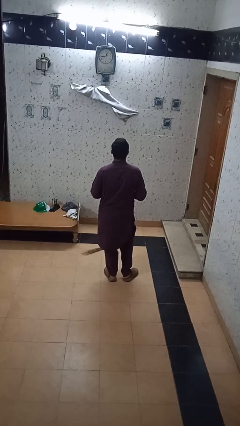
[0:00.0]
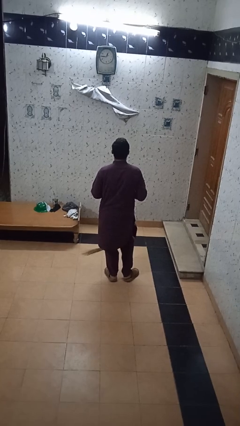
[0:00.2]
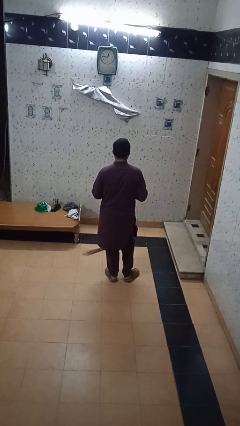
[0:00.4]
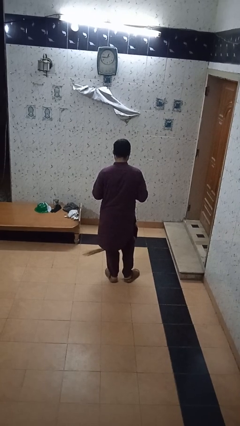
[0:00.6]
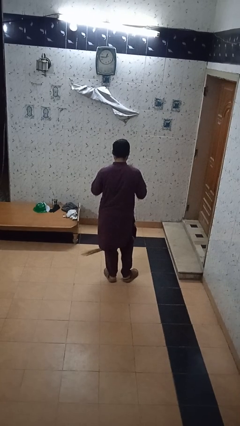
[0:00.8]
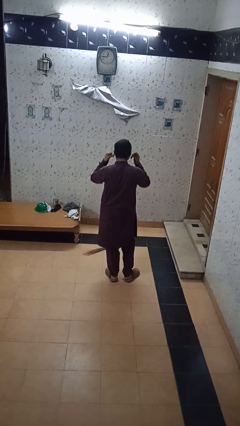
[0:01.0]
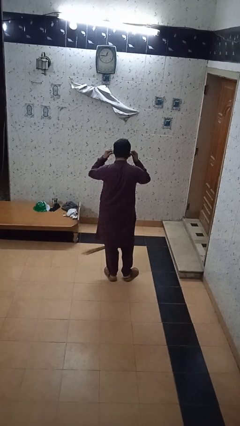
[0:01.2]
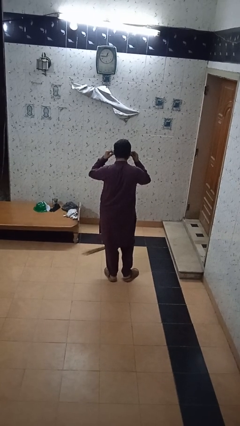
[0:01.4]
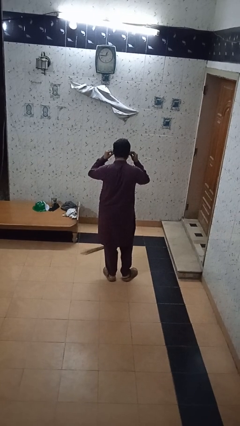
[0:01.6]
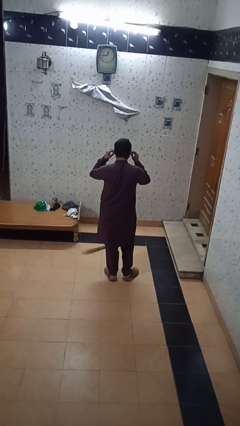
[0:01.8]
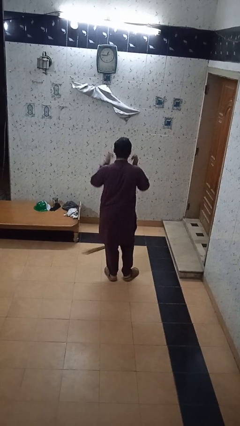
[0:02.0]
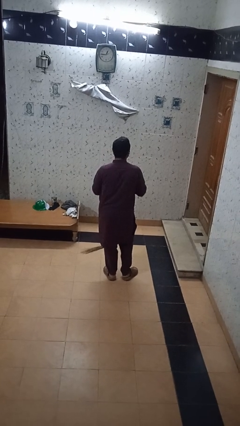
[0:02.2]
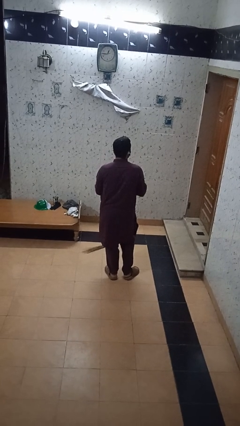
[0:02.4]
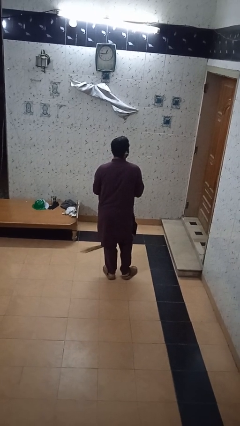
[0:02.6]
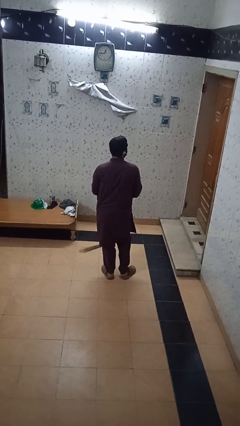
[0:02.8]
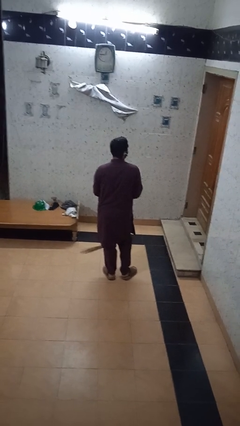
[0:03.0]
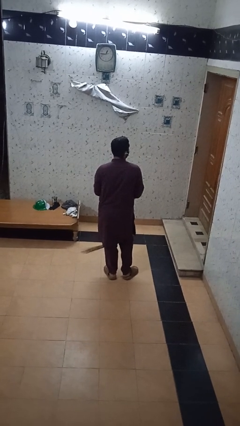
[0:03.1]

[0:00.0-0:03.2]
person puts on headphones

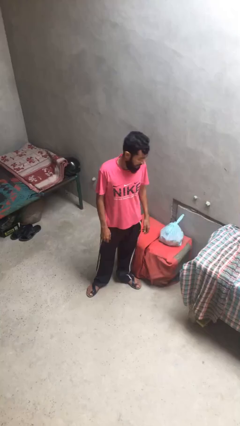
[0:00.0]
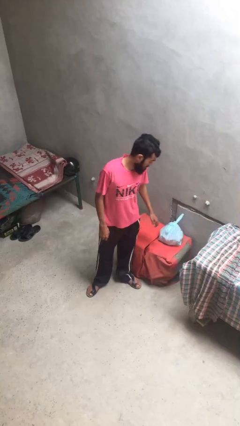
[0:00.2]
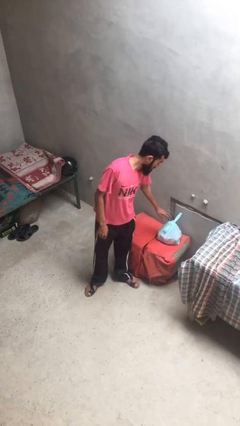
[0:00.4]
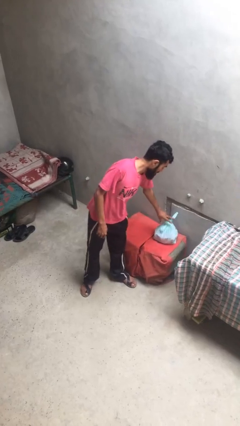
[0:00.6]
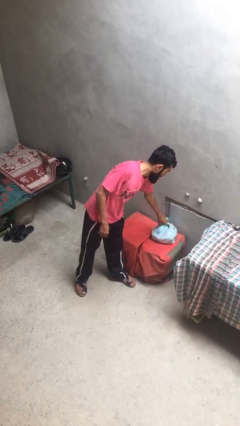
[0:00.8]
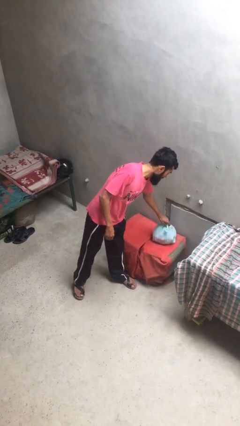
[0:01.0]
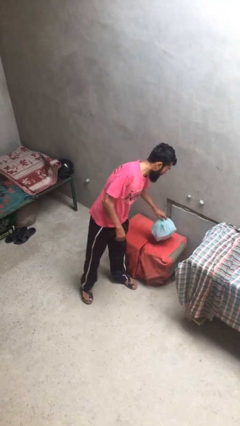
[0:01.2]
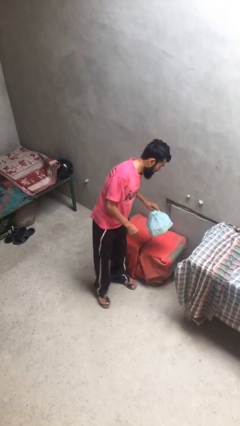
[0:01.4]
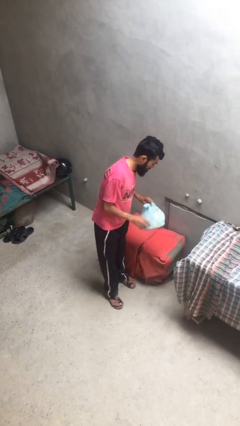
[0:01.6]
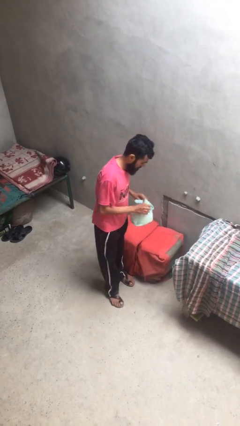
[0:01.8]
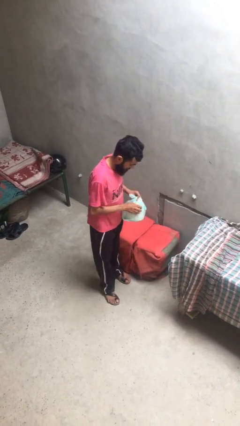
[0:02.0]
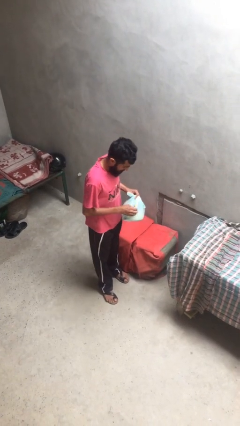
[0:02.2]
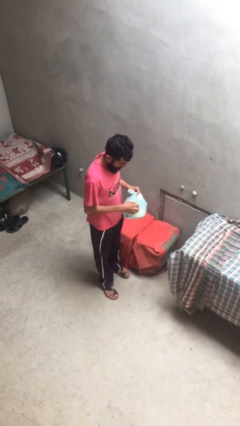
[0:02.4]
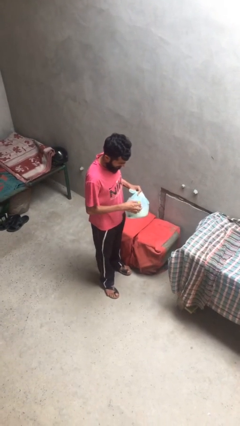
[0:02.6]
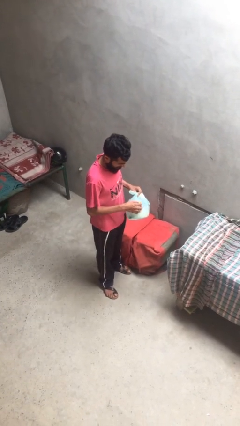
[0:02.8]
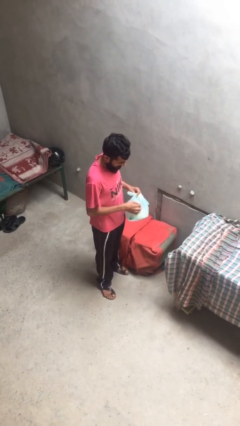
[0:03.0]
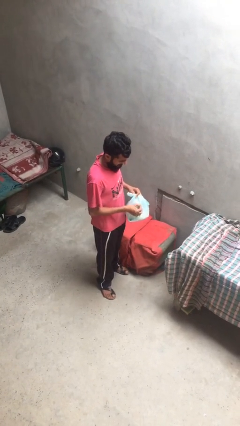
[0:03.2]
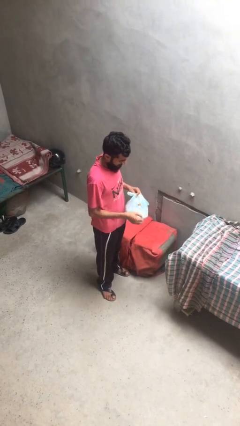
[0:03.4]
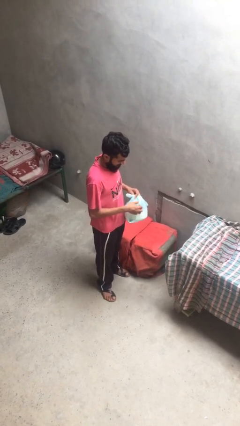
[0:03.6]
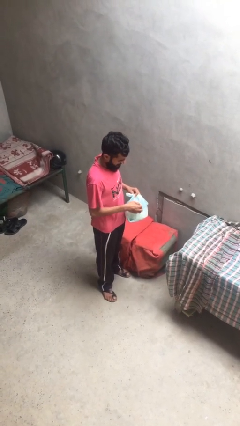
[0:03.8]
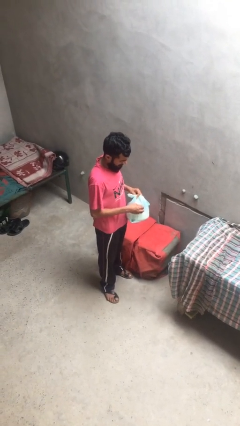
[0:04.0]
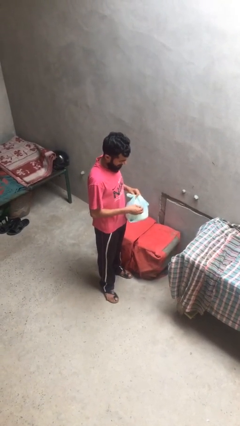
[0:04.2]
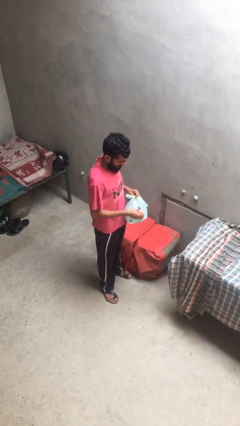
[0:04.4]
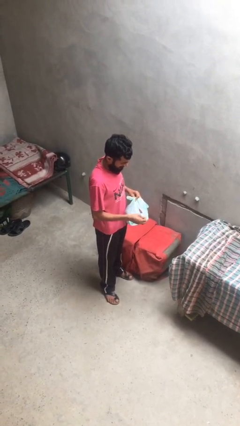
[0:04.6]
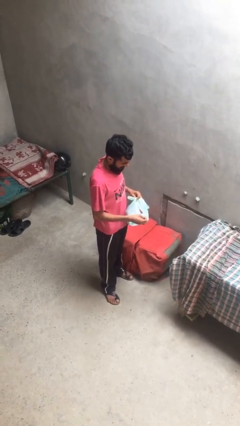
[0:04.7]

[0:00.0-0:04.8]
person picks up object from table

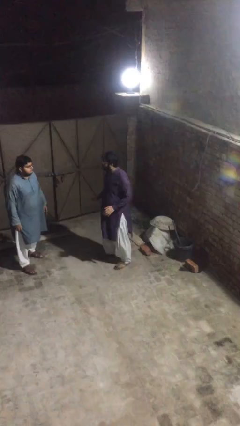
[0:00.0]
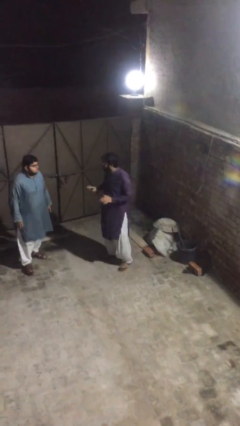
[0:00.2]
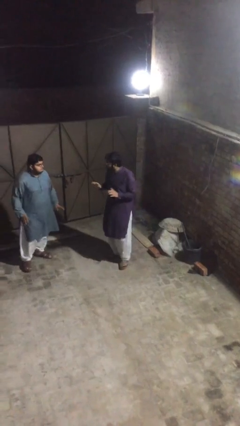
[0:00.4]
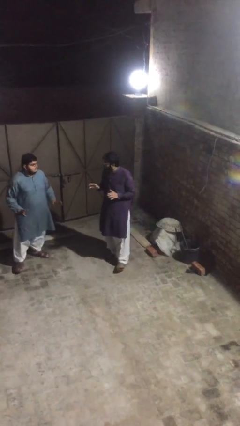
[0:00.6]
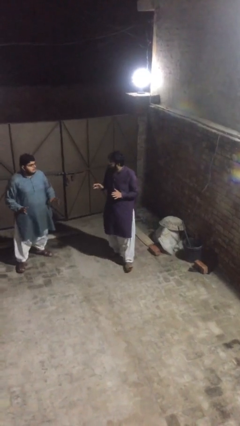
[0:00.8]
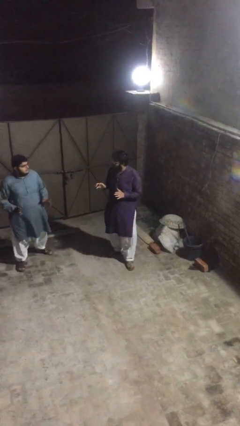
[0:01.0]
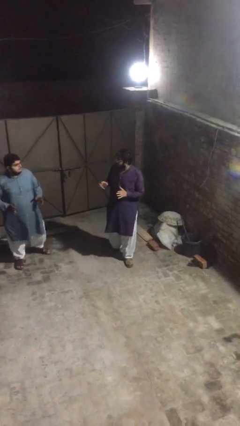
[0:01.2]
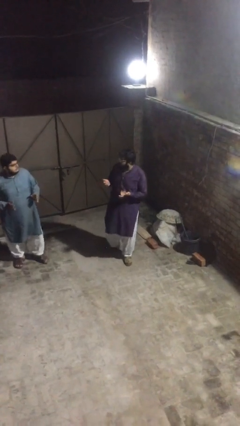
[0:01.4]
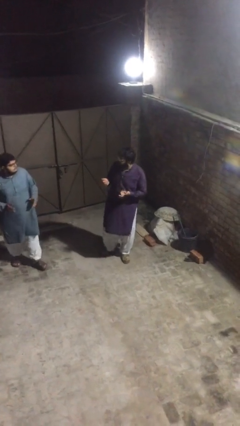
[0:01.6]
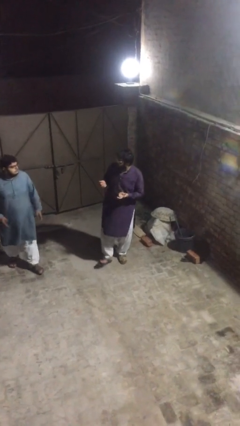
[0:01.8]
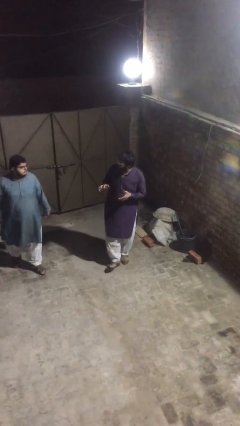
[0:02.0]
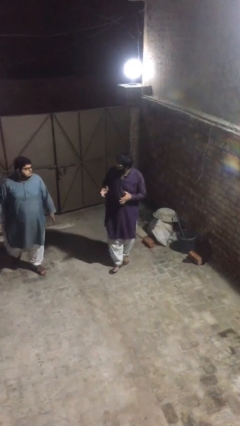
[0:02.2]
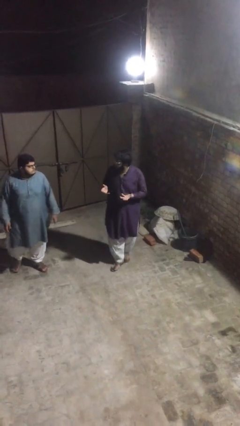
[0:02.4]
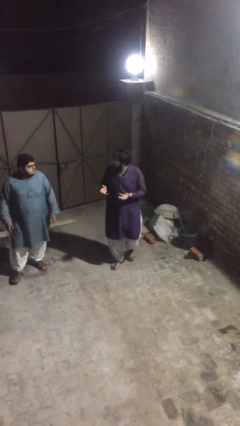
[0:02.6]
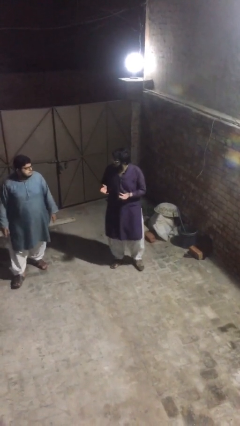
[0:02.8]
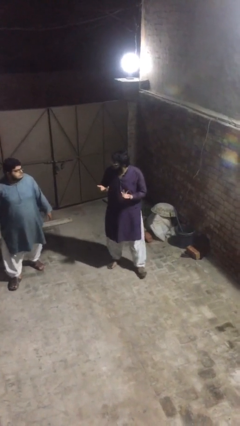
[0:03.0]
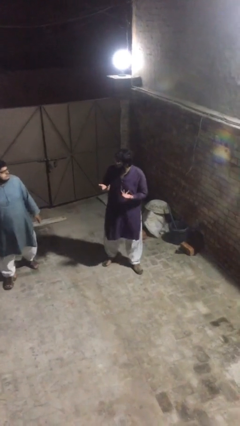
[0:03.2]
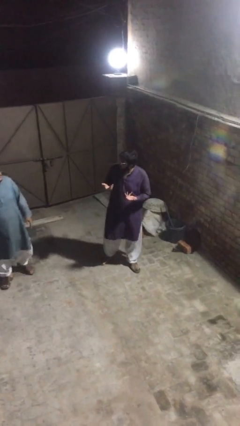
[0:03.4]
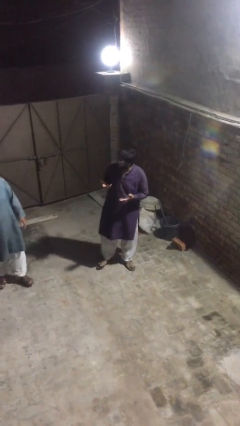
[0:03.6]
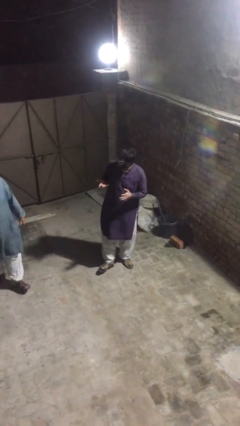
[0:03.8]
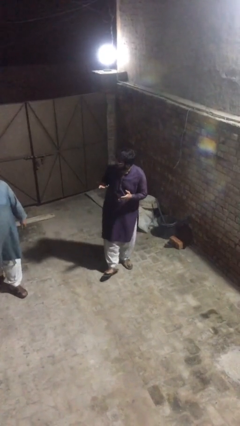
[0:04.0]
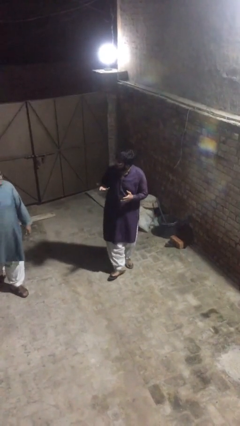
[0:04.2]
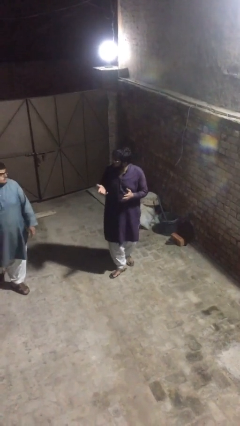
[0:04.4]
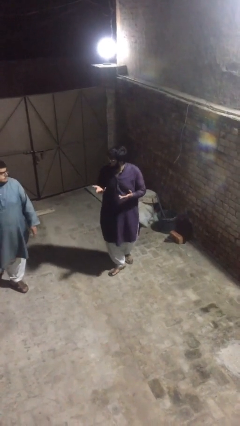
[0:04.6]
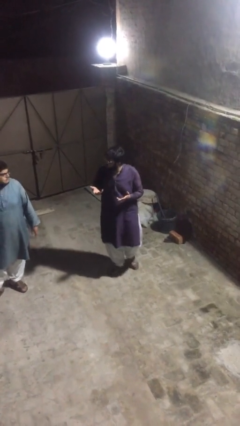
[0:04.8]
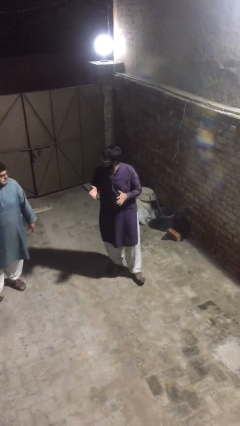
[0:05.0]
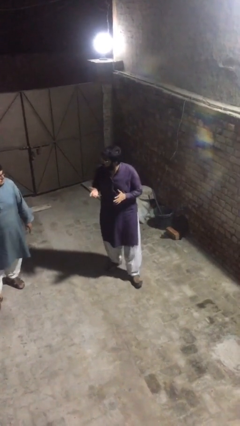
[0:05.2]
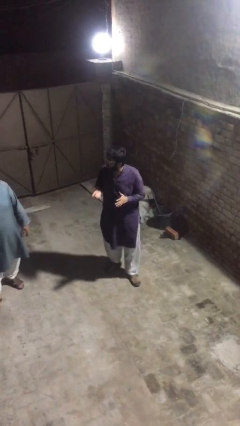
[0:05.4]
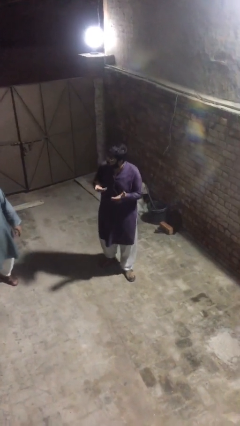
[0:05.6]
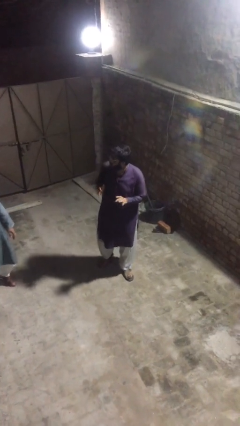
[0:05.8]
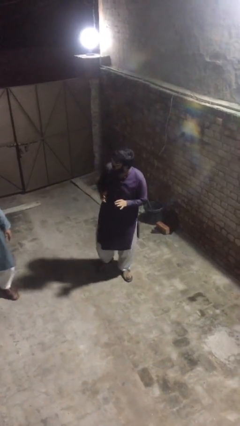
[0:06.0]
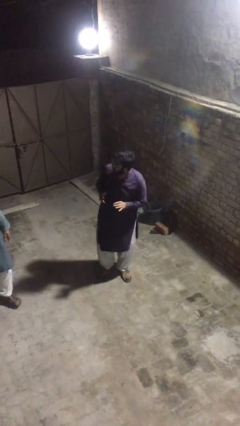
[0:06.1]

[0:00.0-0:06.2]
person talks to person

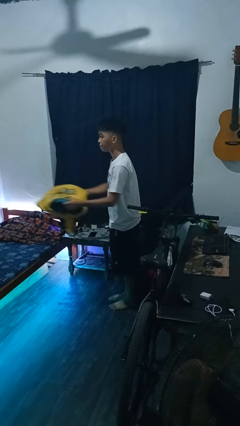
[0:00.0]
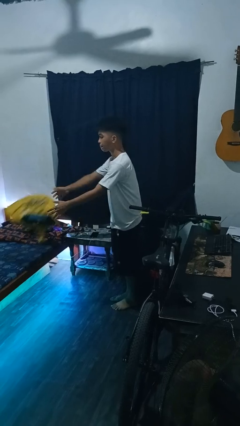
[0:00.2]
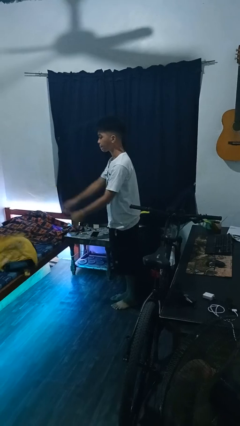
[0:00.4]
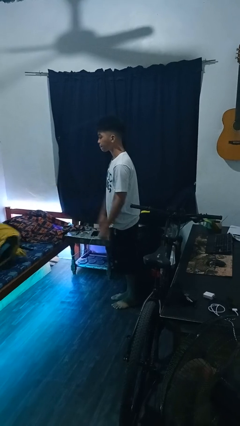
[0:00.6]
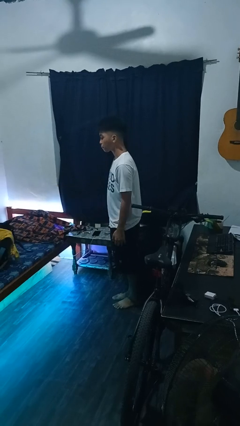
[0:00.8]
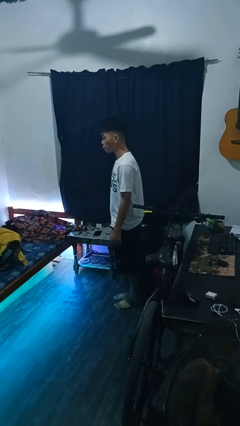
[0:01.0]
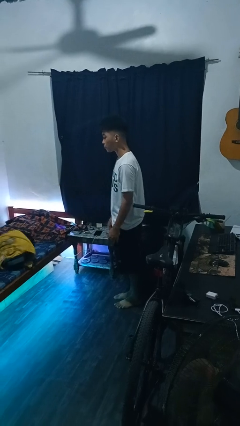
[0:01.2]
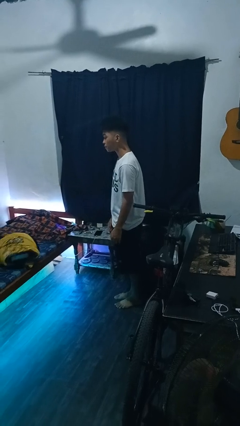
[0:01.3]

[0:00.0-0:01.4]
person throws object on bed

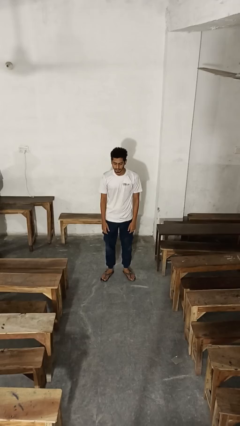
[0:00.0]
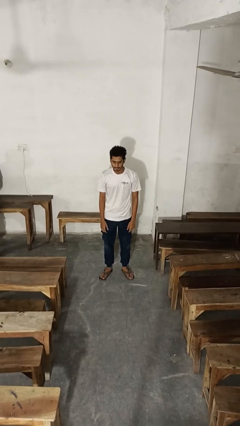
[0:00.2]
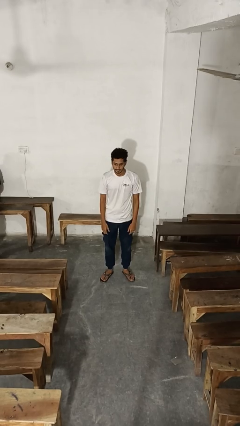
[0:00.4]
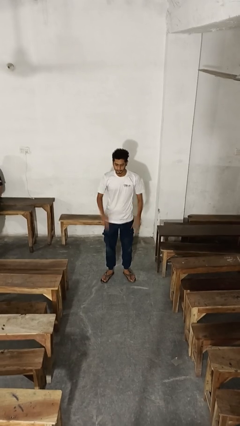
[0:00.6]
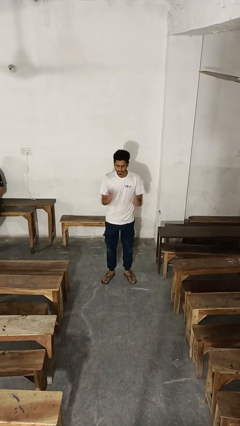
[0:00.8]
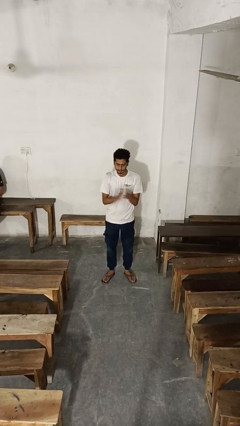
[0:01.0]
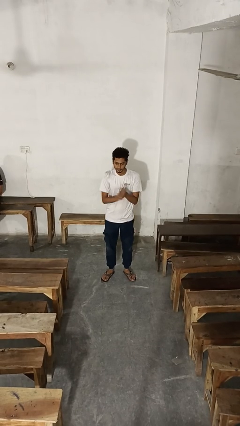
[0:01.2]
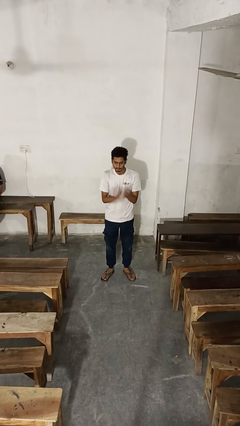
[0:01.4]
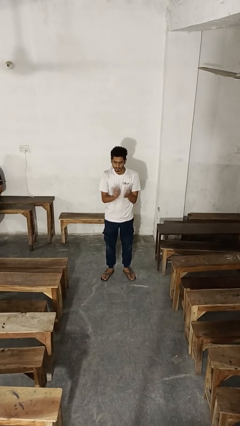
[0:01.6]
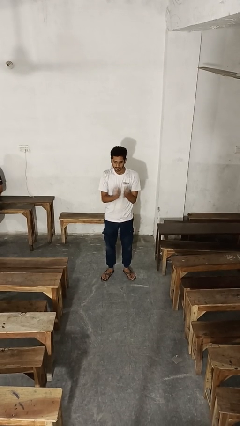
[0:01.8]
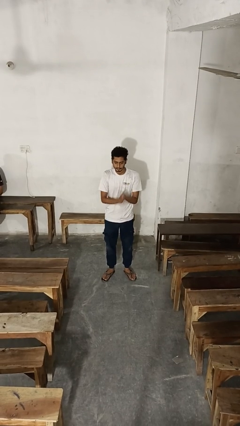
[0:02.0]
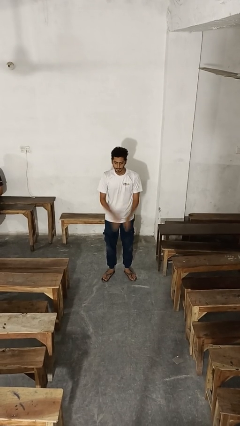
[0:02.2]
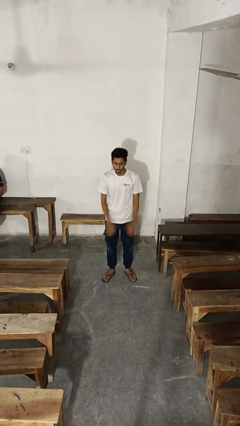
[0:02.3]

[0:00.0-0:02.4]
person claps hands
